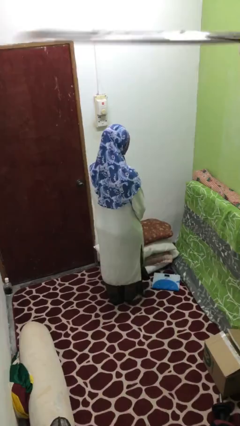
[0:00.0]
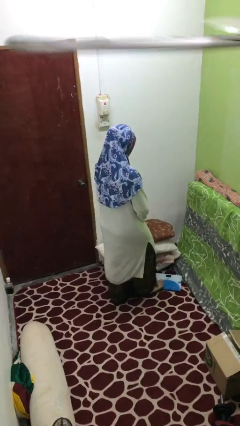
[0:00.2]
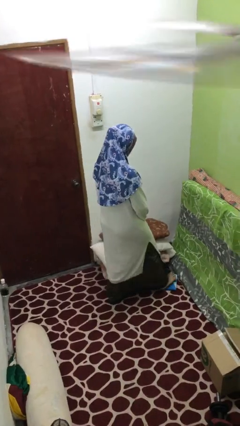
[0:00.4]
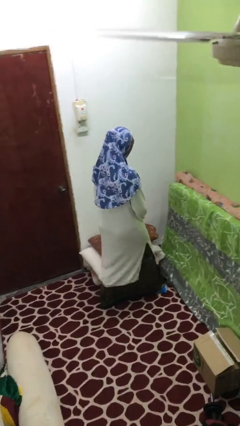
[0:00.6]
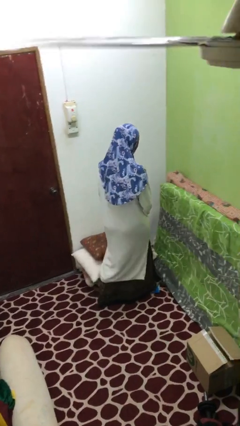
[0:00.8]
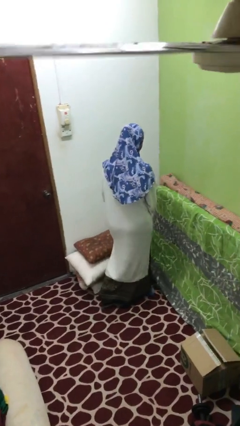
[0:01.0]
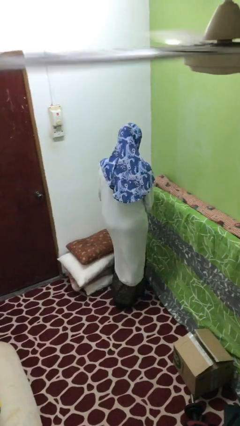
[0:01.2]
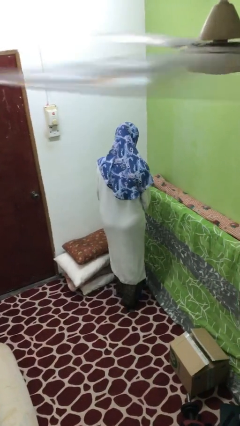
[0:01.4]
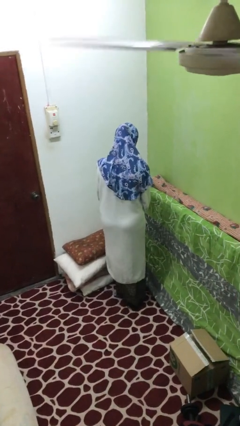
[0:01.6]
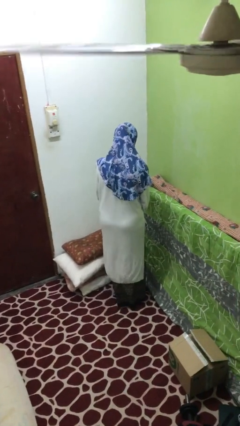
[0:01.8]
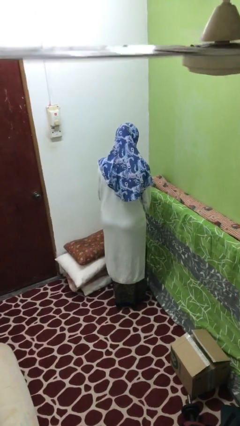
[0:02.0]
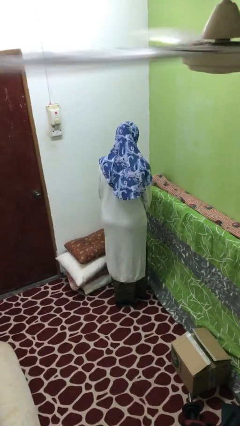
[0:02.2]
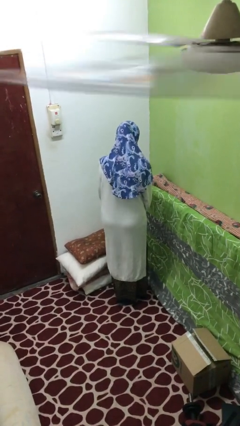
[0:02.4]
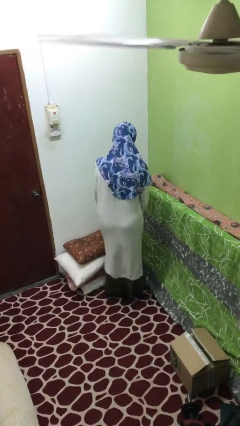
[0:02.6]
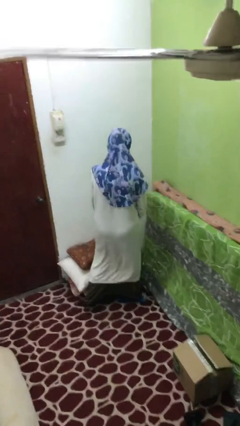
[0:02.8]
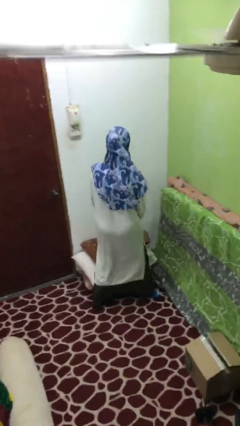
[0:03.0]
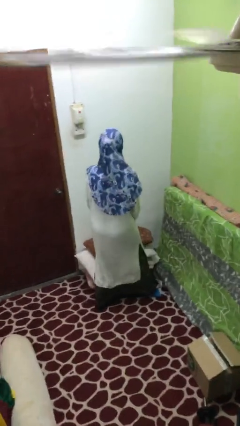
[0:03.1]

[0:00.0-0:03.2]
person uses bodyweight scale

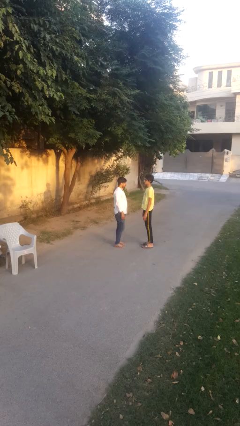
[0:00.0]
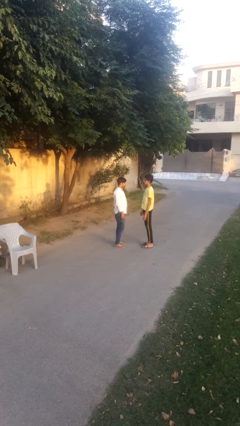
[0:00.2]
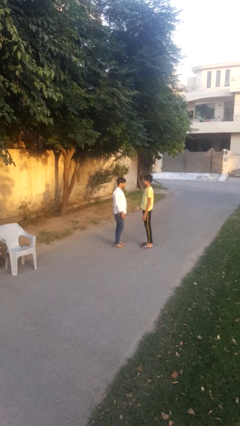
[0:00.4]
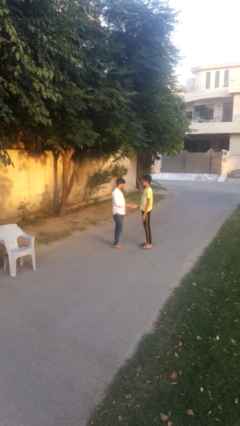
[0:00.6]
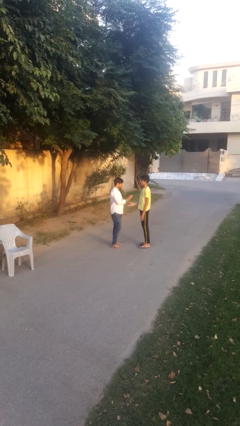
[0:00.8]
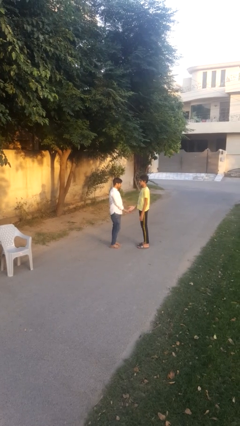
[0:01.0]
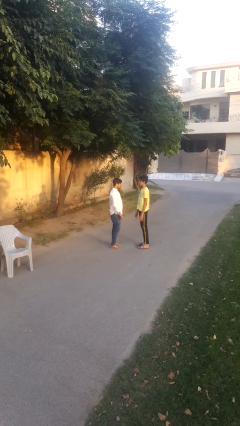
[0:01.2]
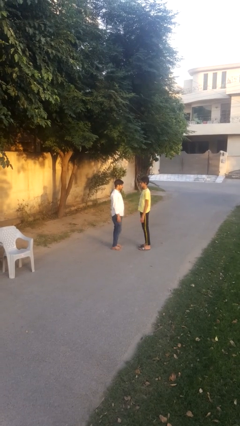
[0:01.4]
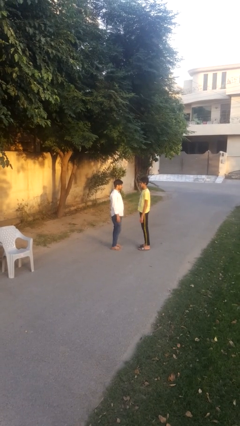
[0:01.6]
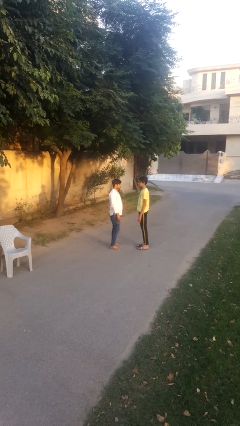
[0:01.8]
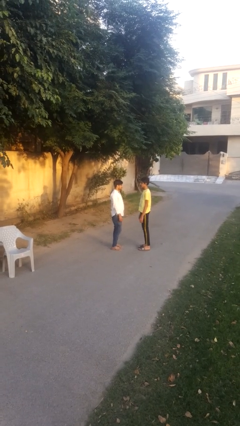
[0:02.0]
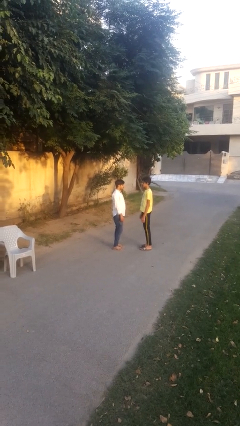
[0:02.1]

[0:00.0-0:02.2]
person highfives hand

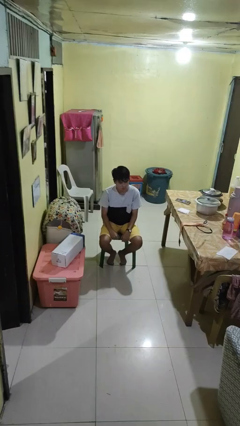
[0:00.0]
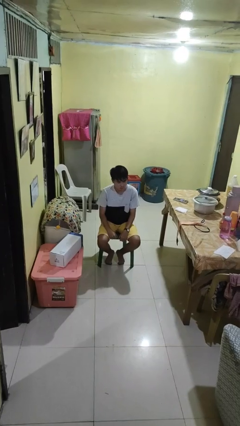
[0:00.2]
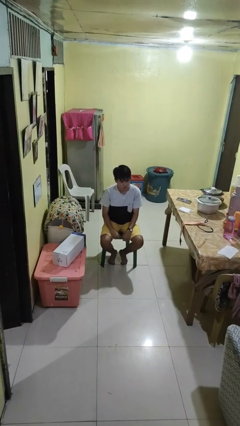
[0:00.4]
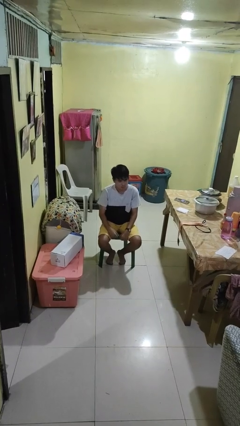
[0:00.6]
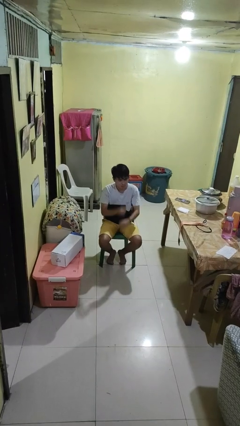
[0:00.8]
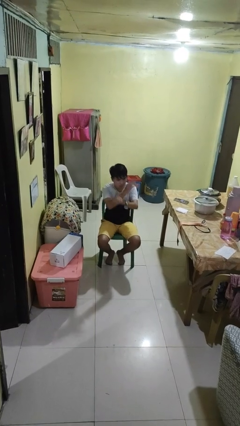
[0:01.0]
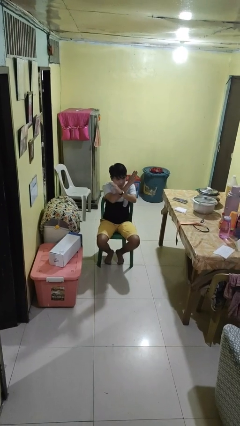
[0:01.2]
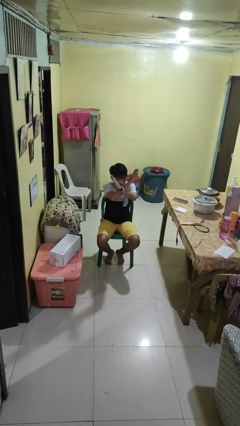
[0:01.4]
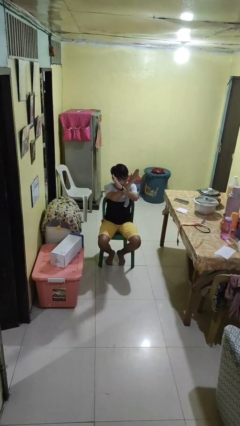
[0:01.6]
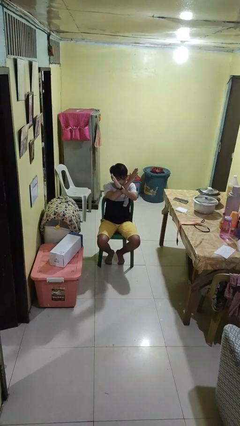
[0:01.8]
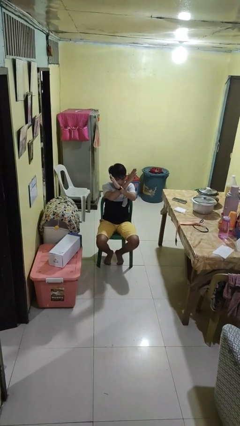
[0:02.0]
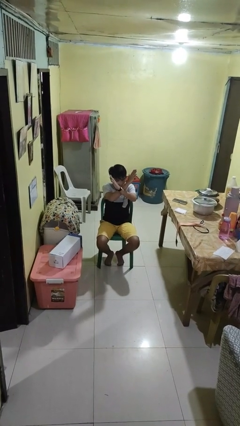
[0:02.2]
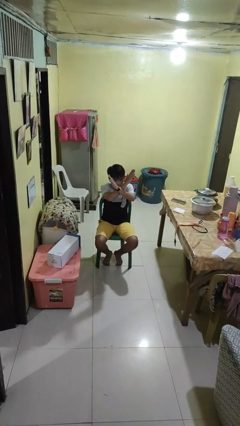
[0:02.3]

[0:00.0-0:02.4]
person gestures arms x

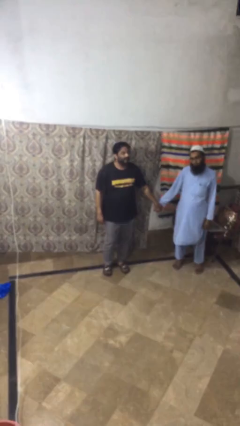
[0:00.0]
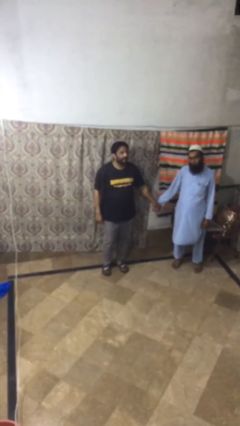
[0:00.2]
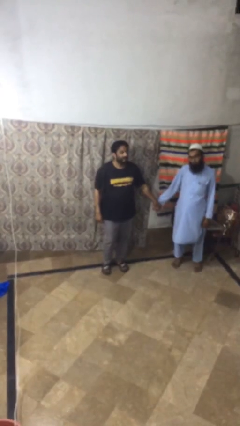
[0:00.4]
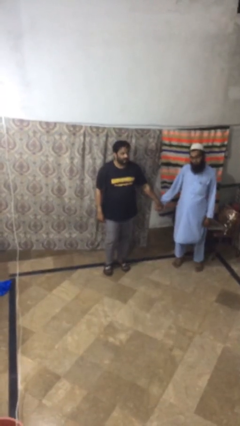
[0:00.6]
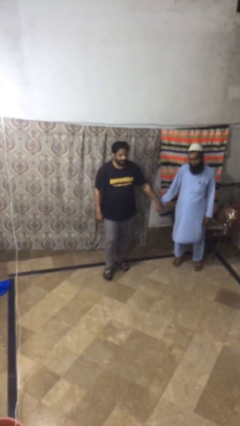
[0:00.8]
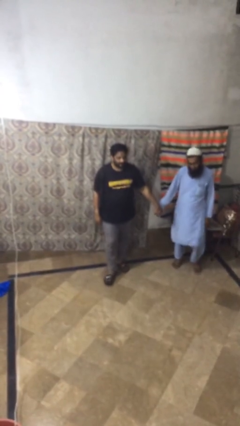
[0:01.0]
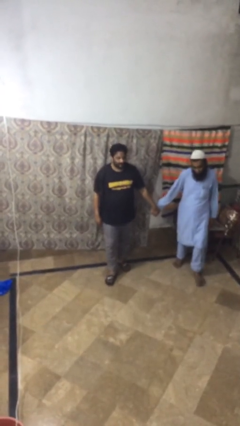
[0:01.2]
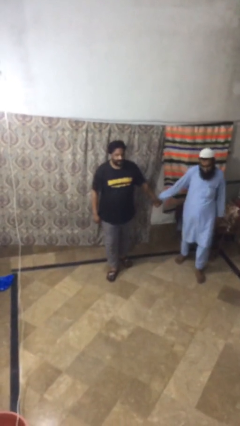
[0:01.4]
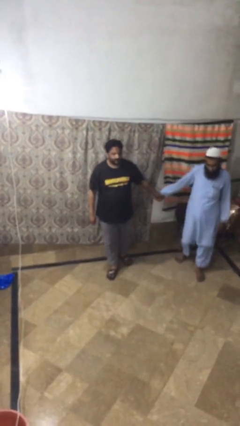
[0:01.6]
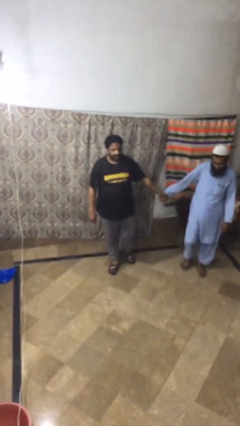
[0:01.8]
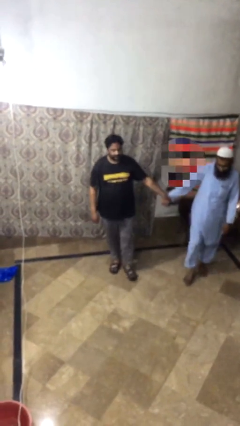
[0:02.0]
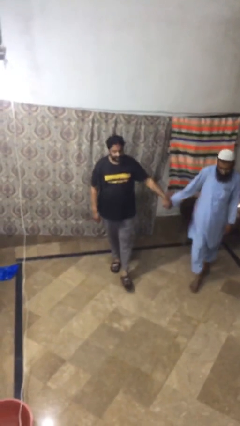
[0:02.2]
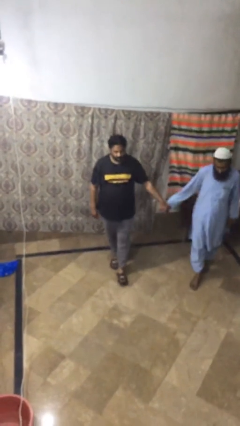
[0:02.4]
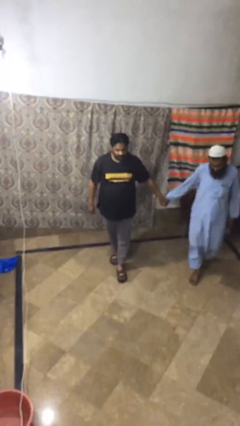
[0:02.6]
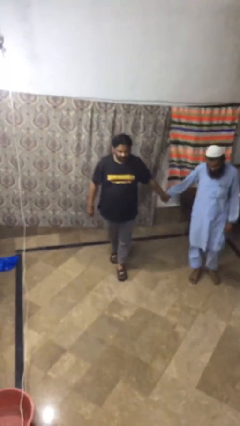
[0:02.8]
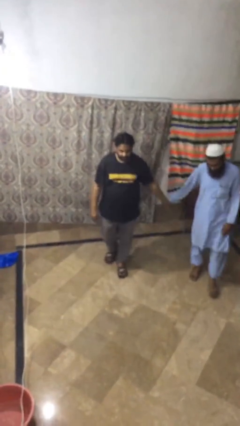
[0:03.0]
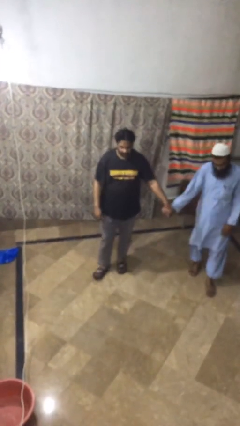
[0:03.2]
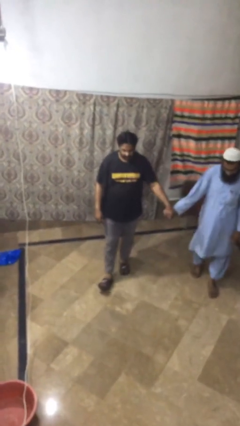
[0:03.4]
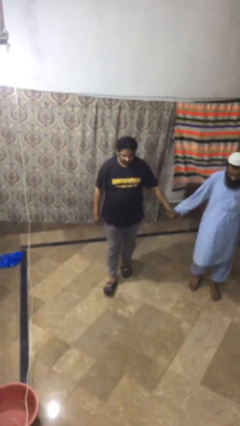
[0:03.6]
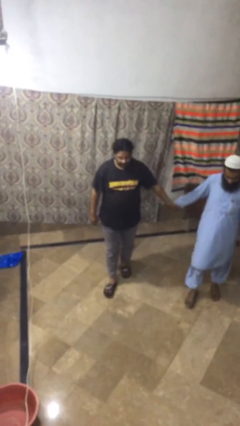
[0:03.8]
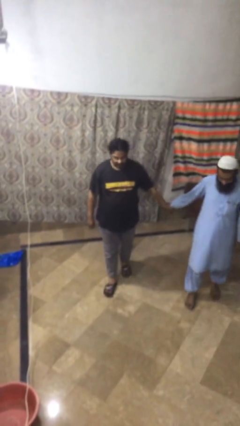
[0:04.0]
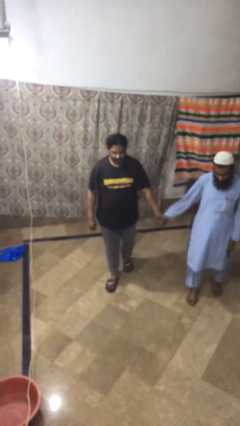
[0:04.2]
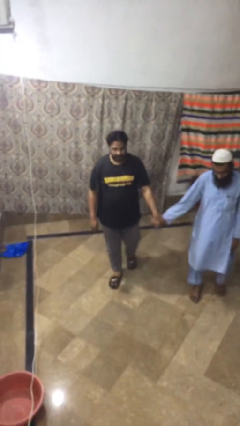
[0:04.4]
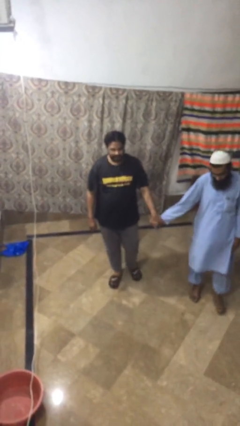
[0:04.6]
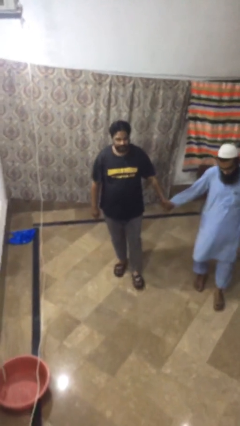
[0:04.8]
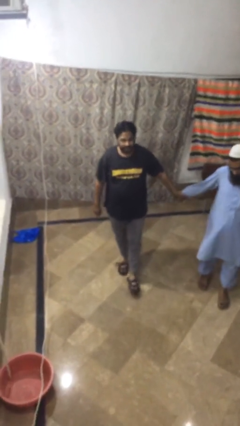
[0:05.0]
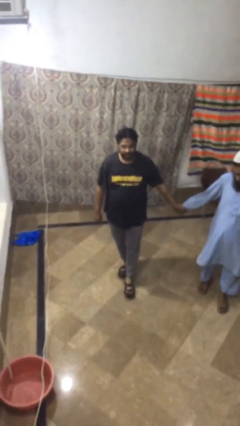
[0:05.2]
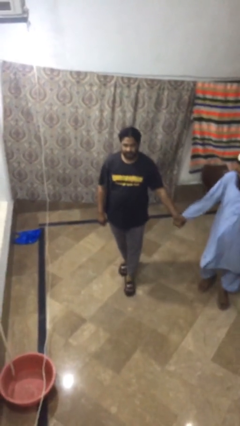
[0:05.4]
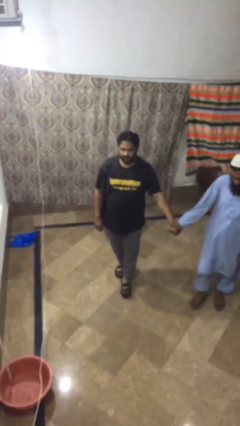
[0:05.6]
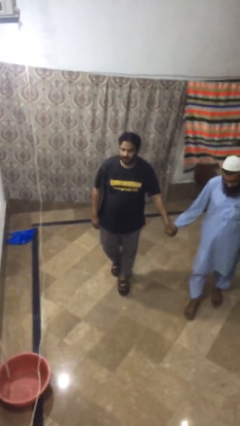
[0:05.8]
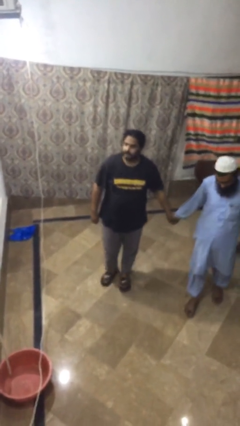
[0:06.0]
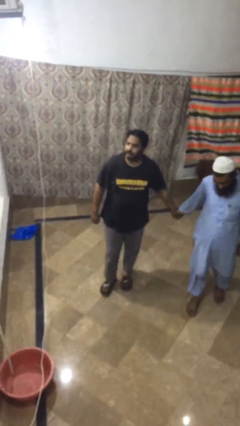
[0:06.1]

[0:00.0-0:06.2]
person holds hand

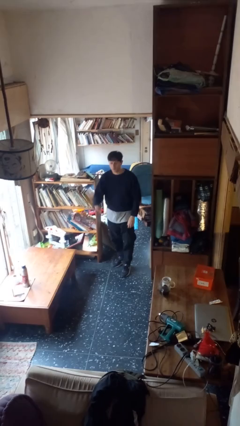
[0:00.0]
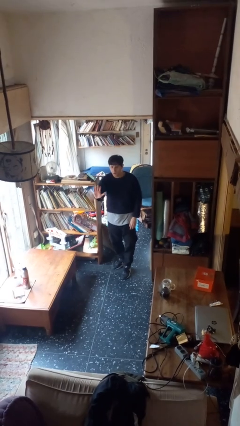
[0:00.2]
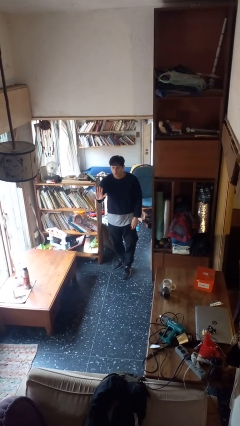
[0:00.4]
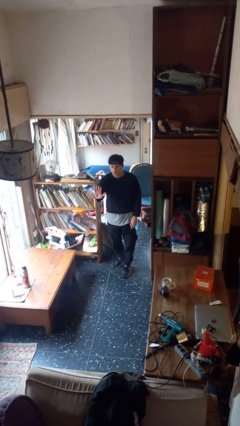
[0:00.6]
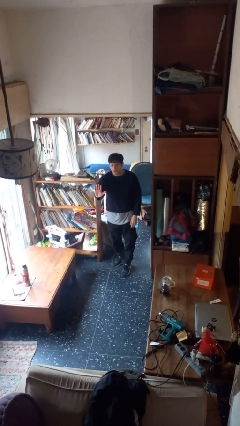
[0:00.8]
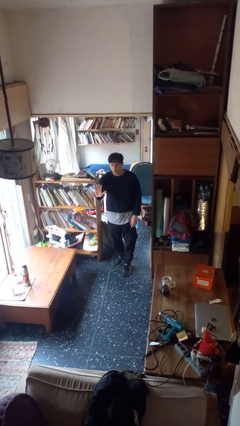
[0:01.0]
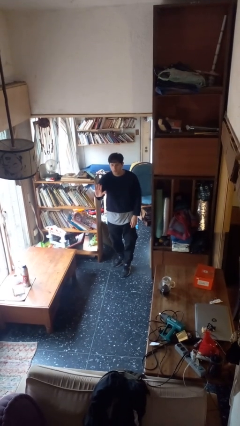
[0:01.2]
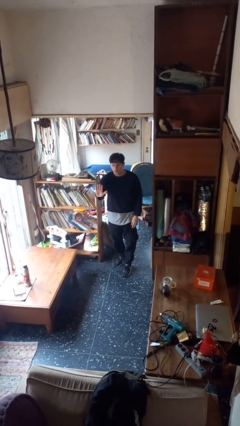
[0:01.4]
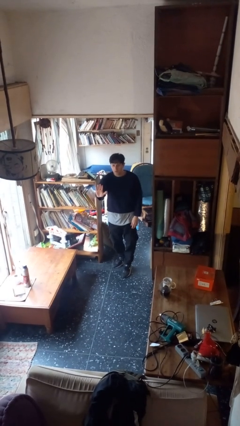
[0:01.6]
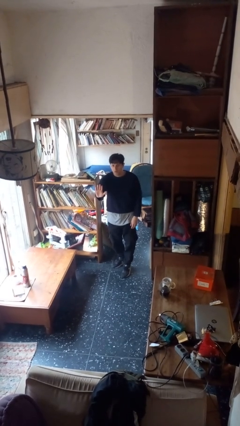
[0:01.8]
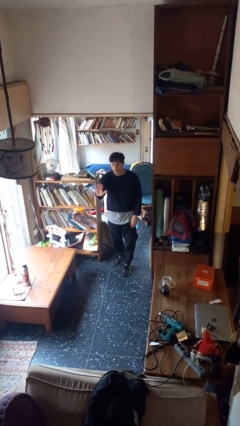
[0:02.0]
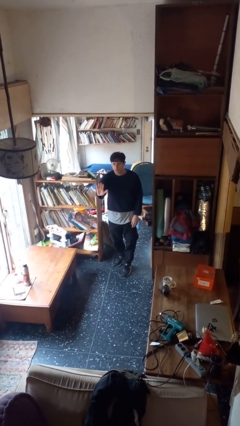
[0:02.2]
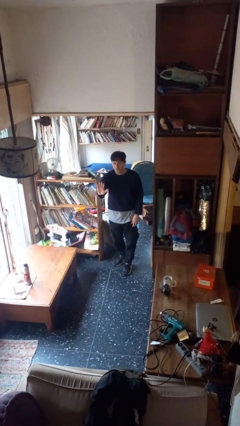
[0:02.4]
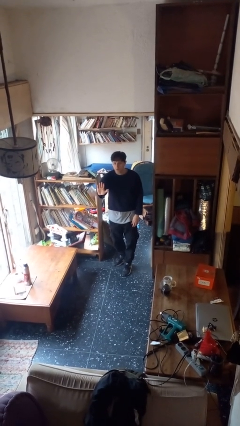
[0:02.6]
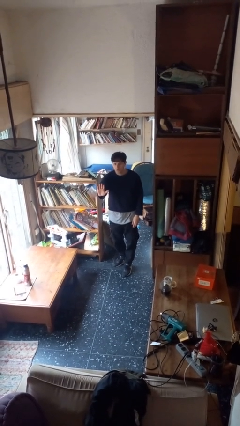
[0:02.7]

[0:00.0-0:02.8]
person gestures stop

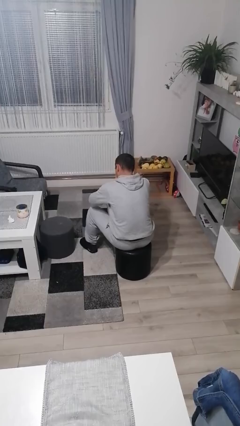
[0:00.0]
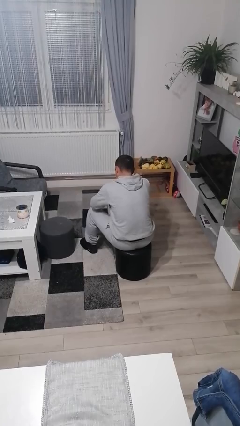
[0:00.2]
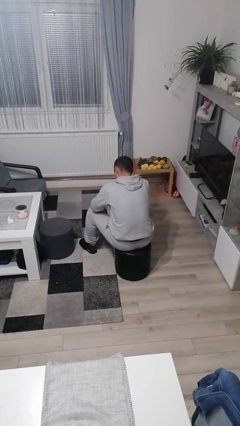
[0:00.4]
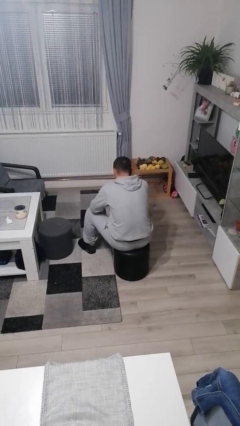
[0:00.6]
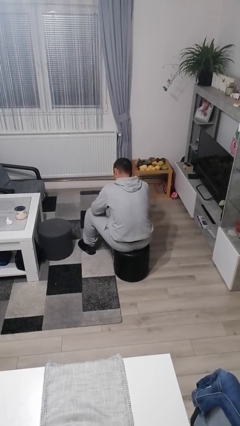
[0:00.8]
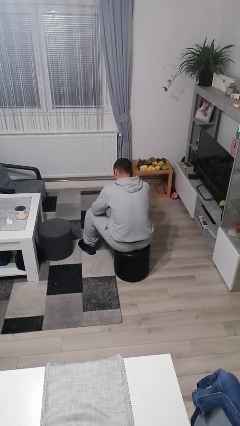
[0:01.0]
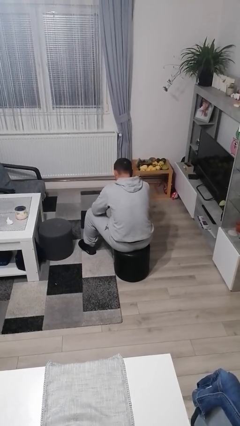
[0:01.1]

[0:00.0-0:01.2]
person gestures behind me
